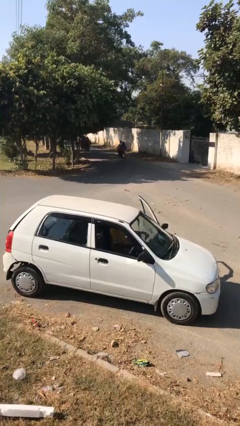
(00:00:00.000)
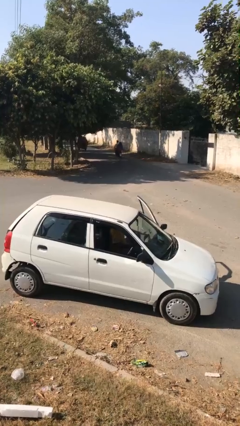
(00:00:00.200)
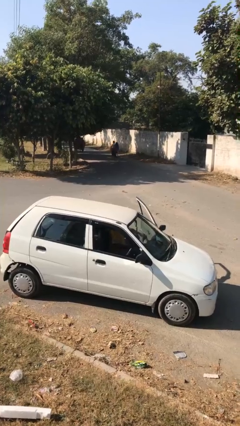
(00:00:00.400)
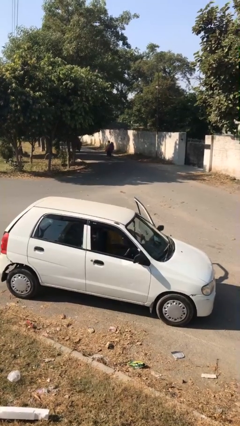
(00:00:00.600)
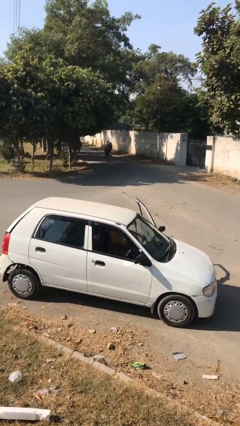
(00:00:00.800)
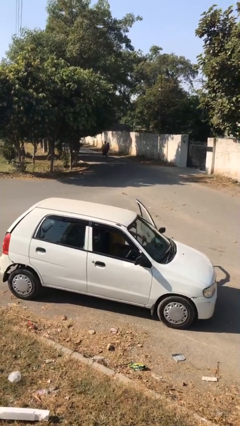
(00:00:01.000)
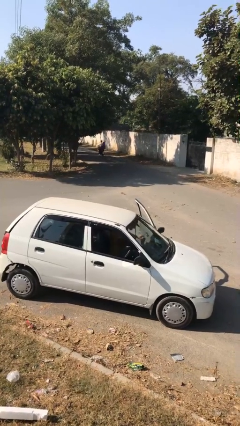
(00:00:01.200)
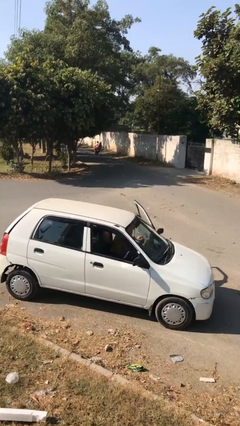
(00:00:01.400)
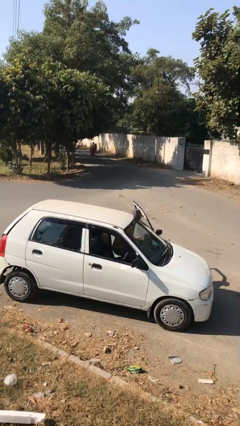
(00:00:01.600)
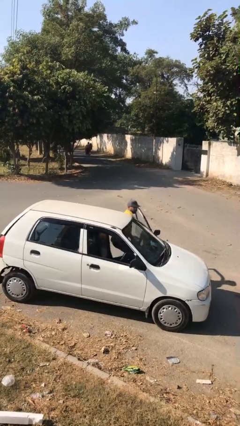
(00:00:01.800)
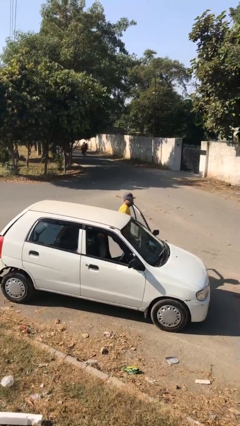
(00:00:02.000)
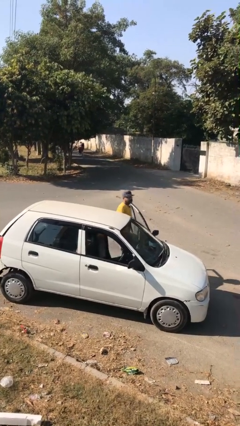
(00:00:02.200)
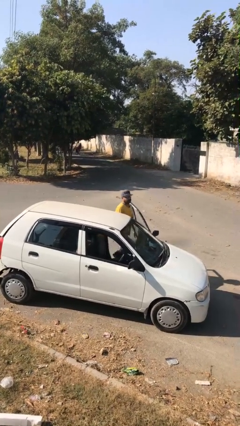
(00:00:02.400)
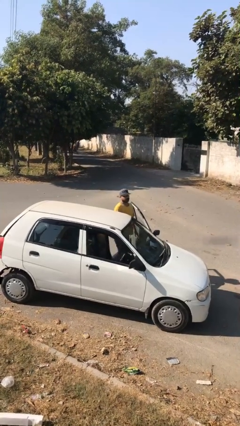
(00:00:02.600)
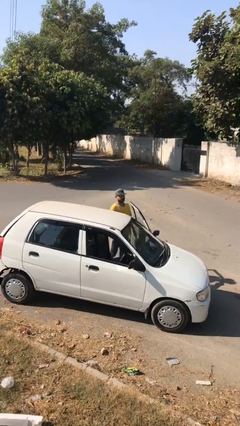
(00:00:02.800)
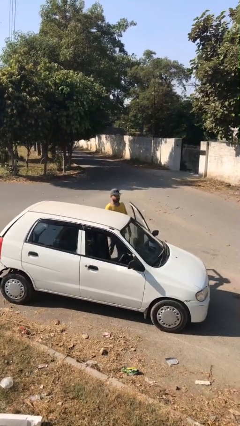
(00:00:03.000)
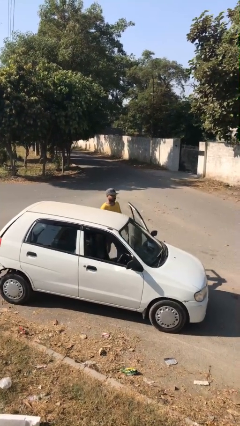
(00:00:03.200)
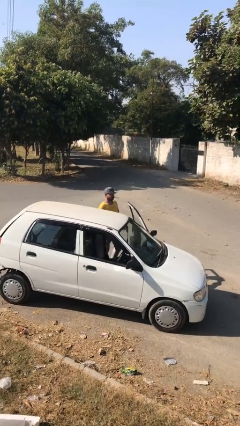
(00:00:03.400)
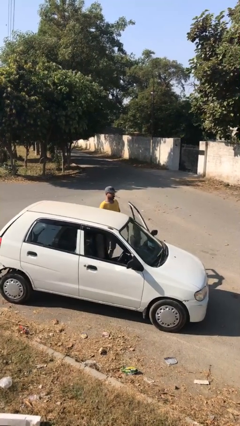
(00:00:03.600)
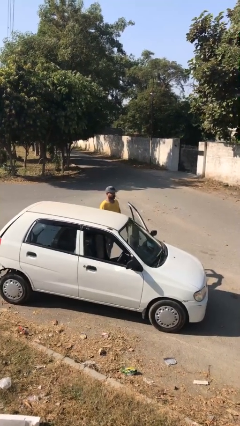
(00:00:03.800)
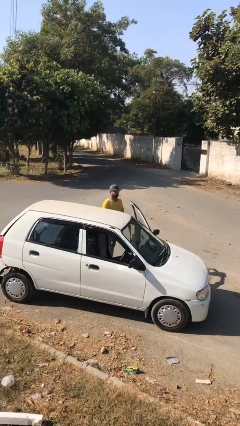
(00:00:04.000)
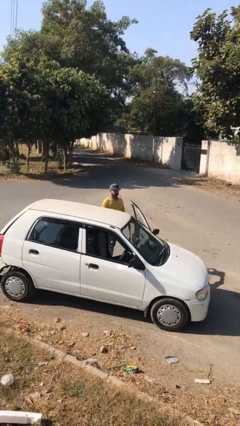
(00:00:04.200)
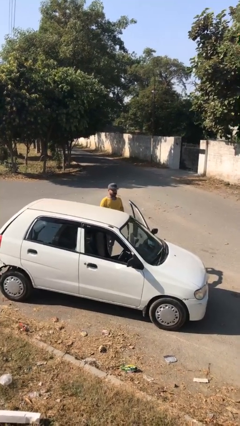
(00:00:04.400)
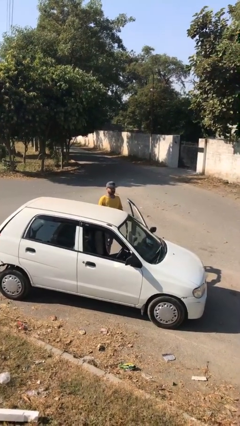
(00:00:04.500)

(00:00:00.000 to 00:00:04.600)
person exits car

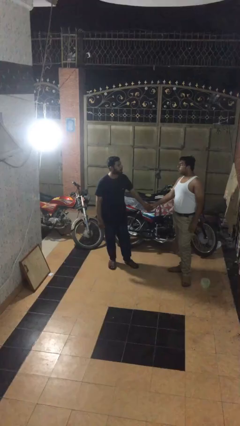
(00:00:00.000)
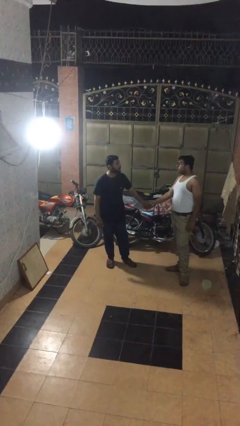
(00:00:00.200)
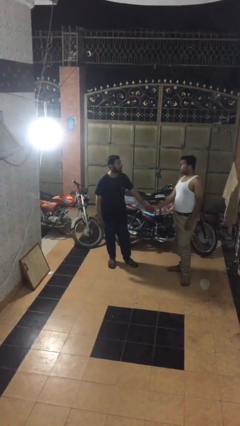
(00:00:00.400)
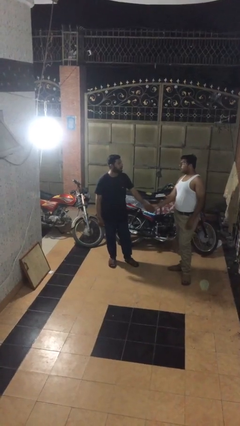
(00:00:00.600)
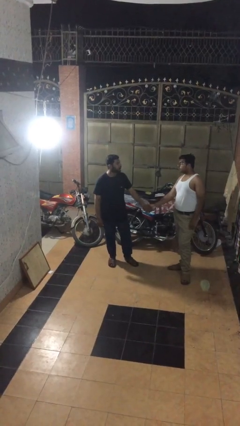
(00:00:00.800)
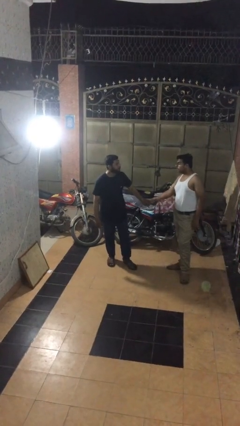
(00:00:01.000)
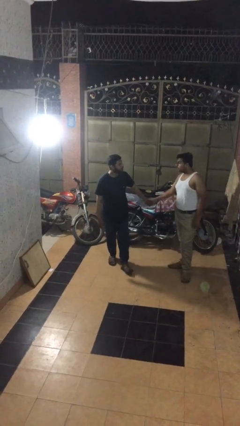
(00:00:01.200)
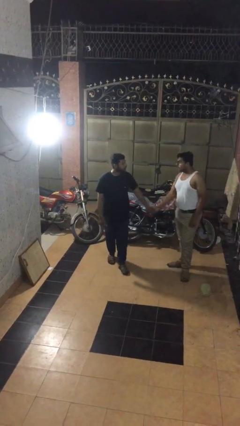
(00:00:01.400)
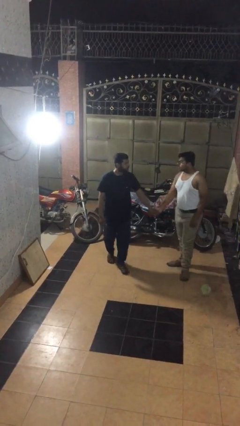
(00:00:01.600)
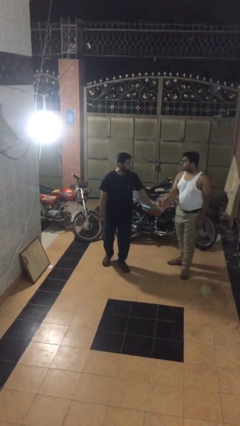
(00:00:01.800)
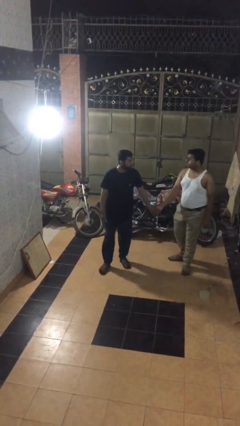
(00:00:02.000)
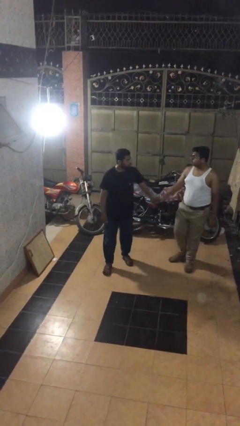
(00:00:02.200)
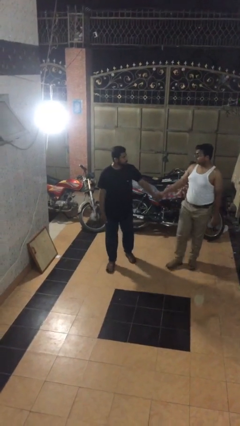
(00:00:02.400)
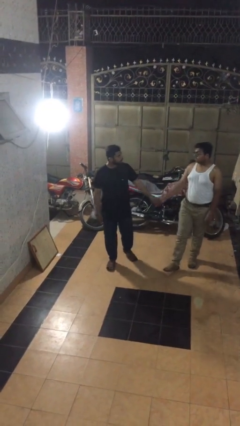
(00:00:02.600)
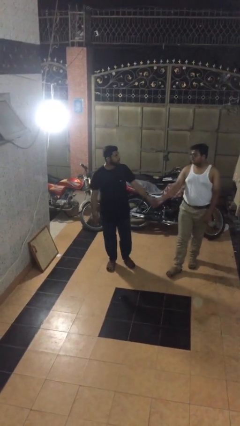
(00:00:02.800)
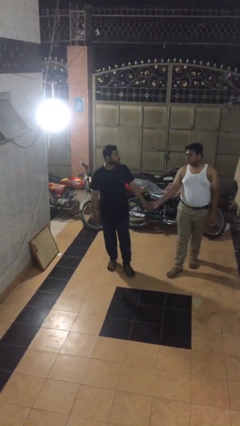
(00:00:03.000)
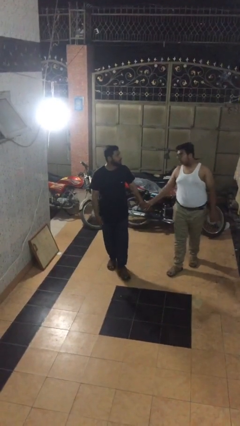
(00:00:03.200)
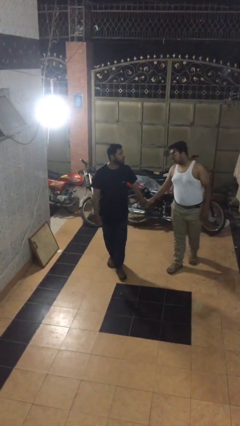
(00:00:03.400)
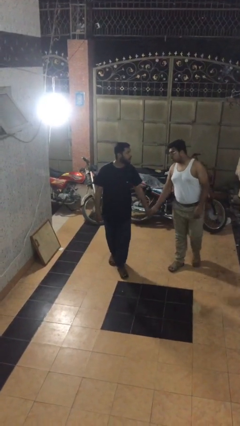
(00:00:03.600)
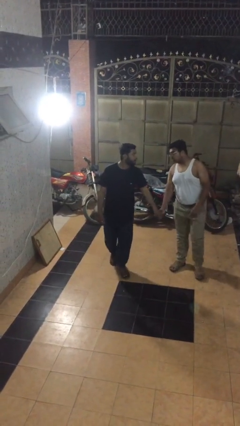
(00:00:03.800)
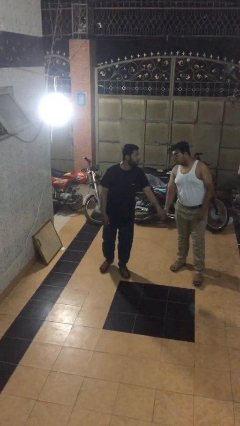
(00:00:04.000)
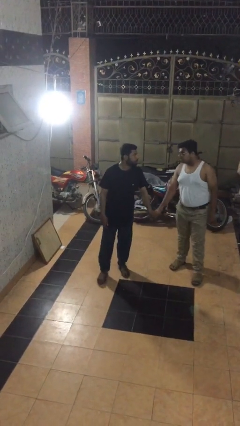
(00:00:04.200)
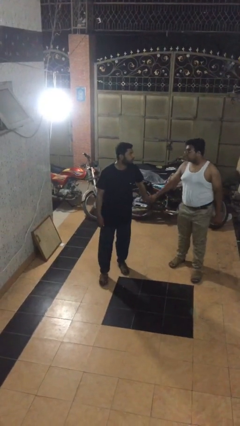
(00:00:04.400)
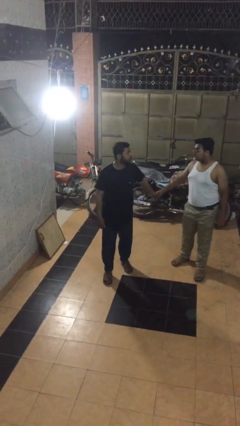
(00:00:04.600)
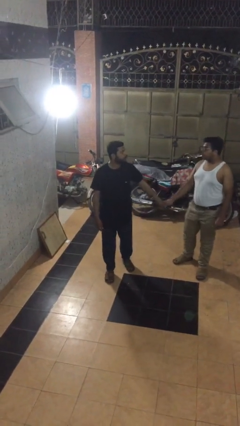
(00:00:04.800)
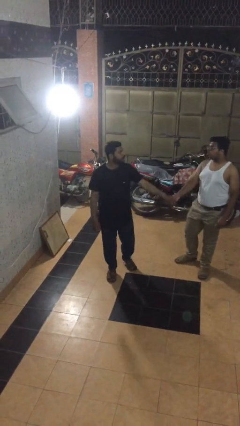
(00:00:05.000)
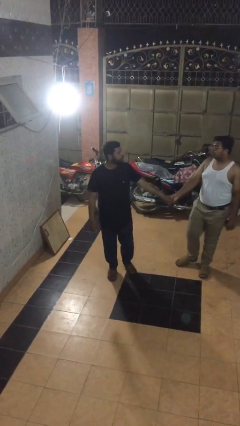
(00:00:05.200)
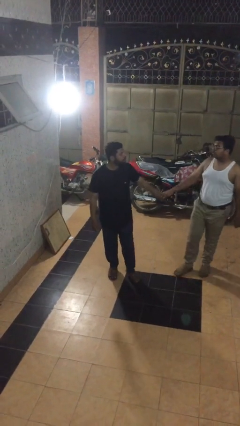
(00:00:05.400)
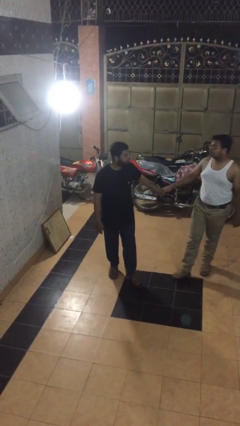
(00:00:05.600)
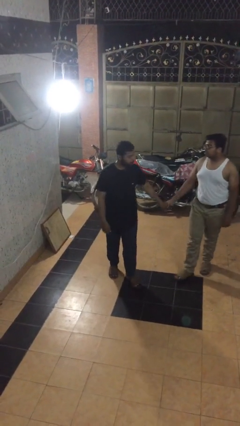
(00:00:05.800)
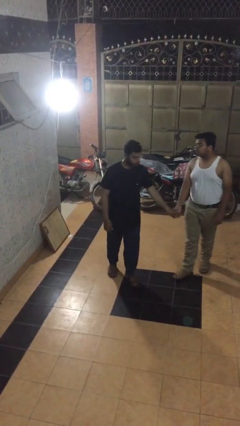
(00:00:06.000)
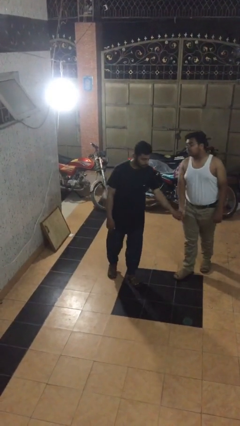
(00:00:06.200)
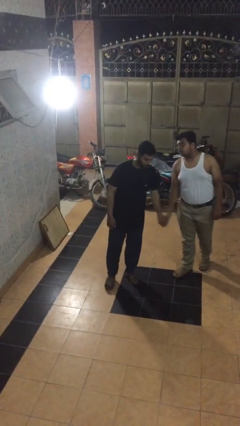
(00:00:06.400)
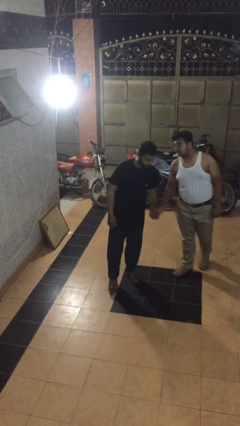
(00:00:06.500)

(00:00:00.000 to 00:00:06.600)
person holds hand

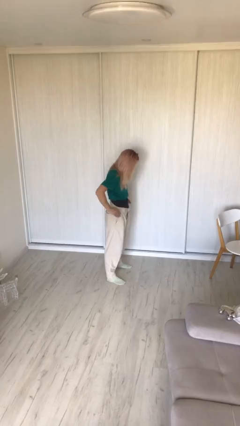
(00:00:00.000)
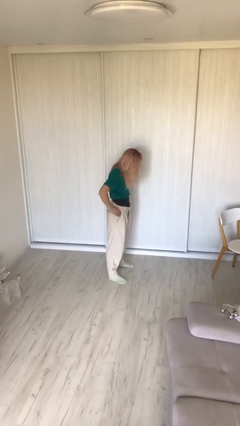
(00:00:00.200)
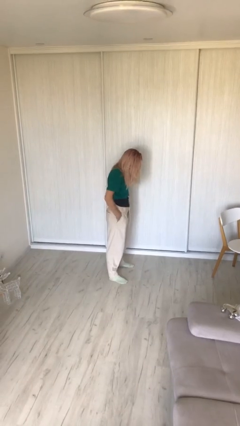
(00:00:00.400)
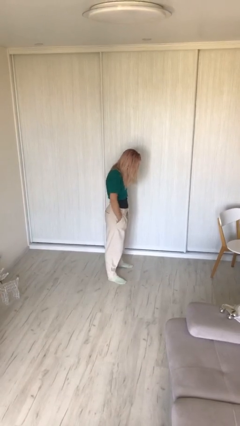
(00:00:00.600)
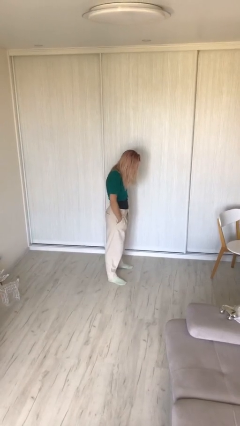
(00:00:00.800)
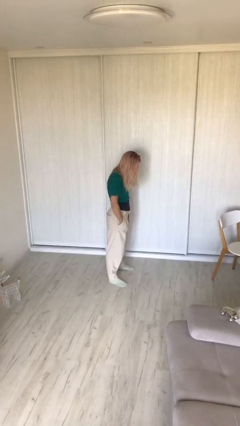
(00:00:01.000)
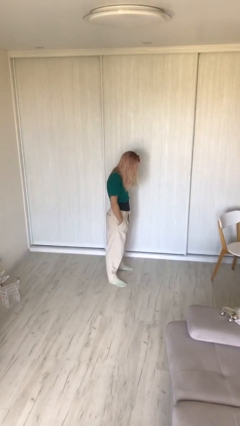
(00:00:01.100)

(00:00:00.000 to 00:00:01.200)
person puts hands in back pockets

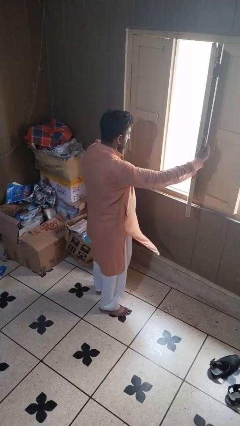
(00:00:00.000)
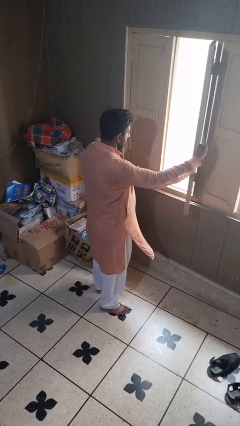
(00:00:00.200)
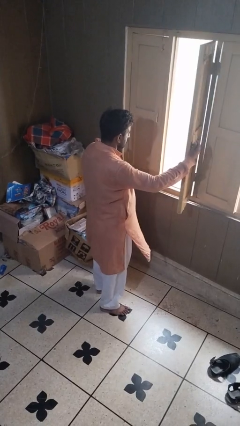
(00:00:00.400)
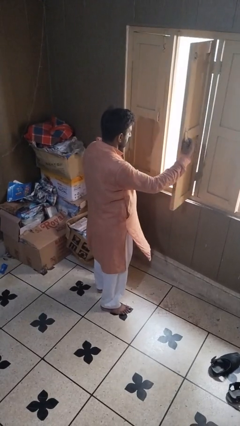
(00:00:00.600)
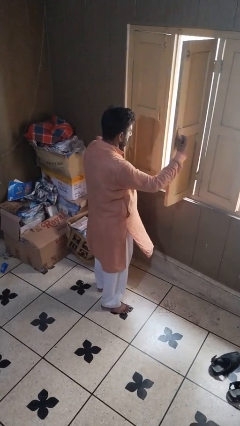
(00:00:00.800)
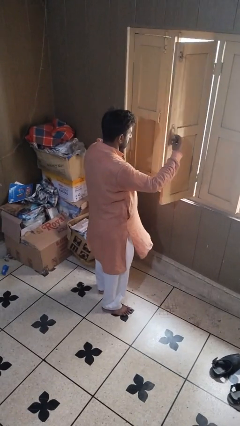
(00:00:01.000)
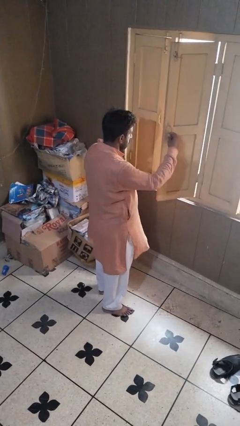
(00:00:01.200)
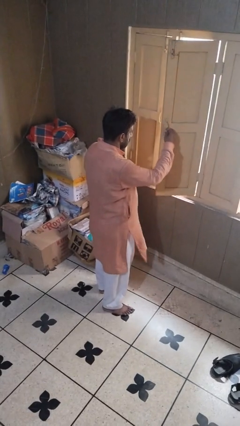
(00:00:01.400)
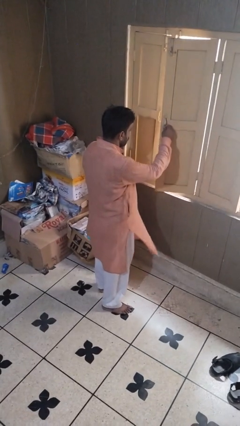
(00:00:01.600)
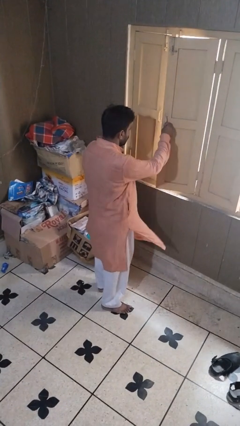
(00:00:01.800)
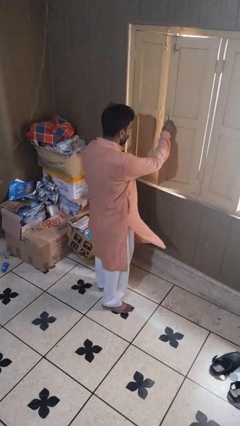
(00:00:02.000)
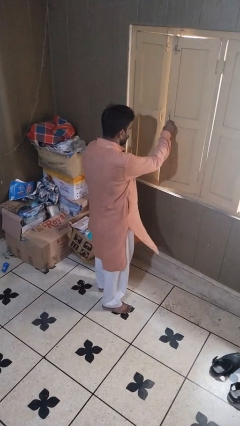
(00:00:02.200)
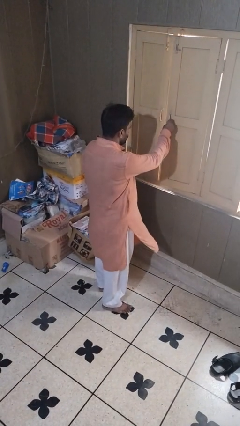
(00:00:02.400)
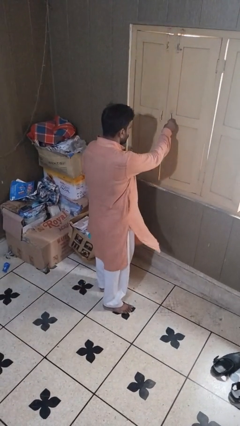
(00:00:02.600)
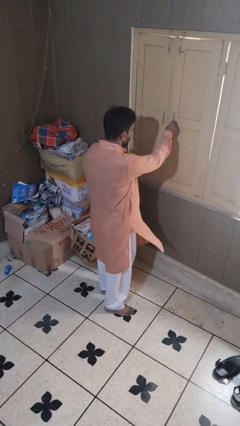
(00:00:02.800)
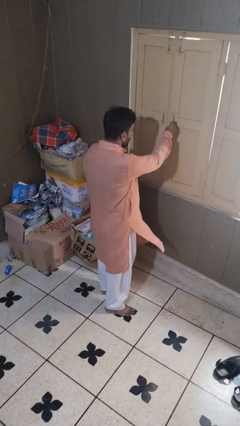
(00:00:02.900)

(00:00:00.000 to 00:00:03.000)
person closes home window

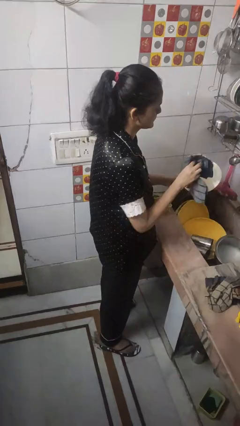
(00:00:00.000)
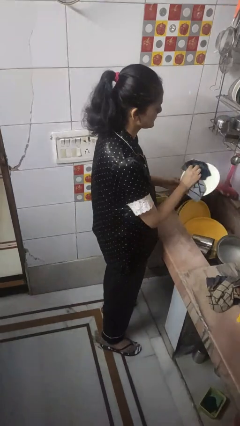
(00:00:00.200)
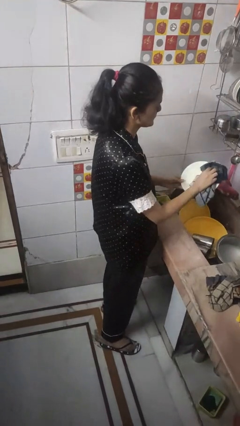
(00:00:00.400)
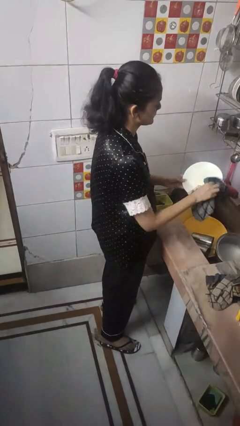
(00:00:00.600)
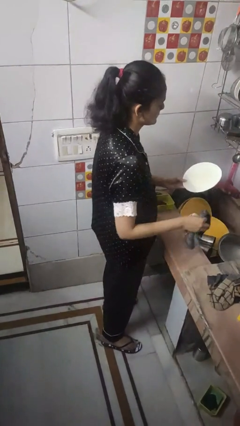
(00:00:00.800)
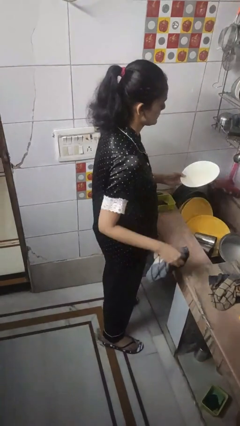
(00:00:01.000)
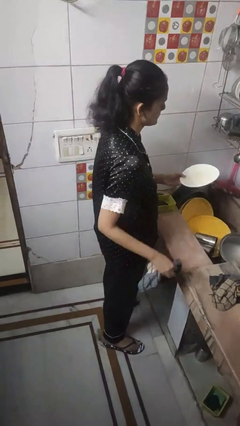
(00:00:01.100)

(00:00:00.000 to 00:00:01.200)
person dries dish

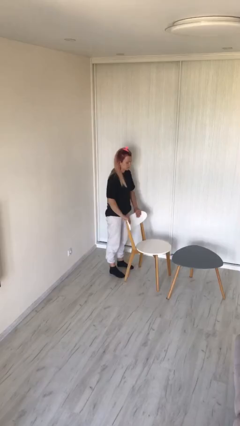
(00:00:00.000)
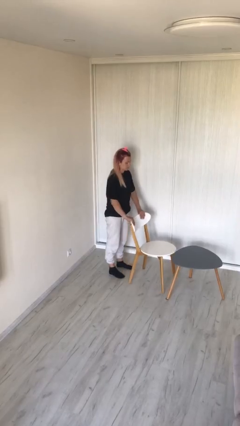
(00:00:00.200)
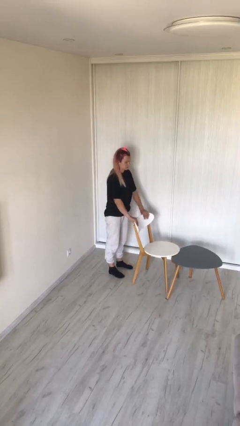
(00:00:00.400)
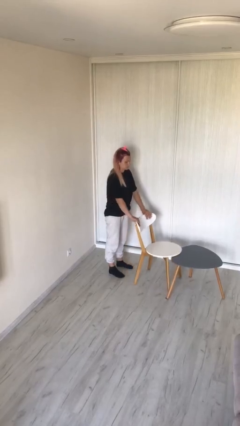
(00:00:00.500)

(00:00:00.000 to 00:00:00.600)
person pushes in chair
